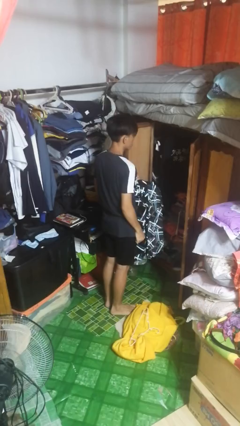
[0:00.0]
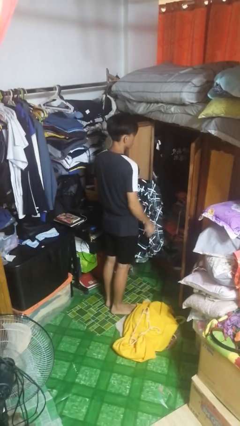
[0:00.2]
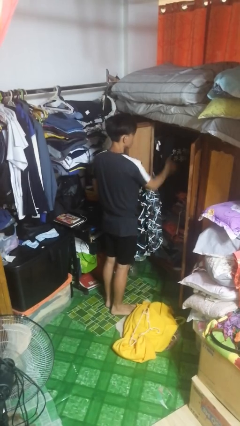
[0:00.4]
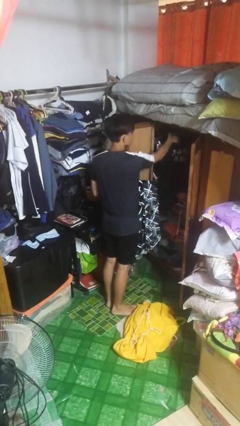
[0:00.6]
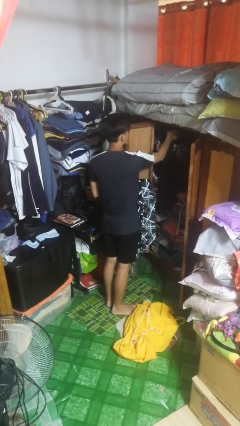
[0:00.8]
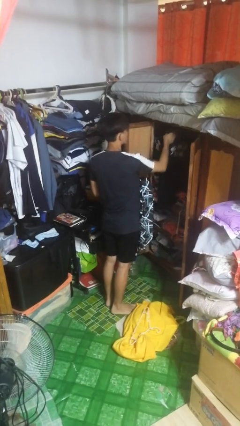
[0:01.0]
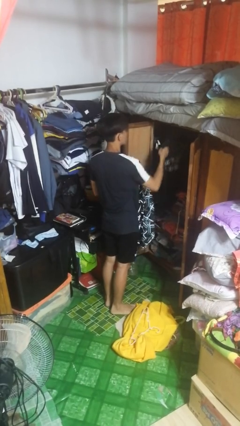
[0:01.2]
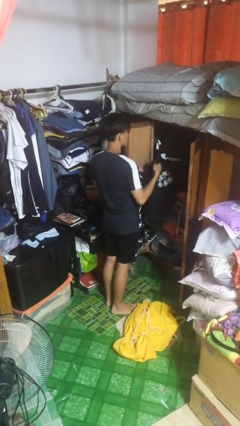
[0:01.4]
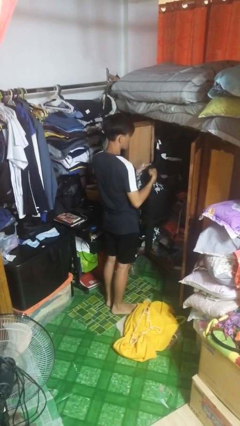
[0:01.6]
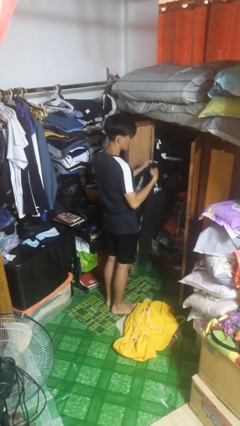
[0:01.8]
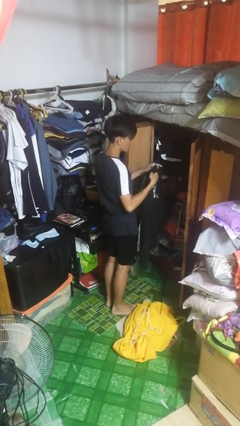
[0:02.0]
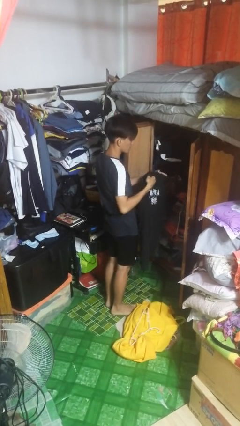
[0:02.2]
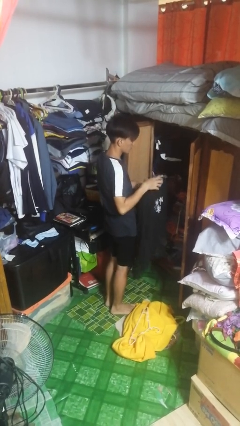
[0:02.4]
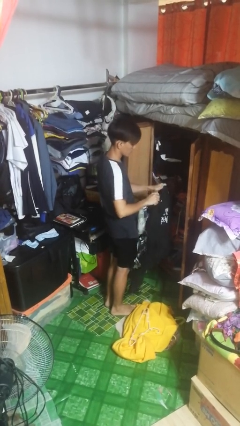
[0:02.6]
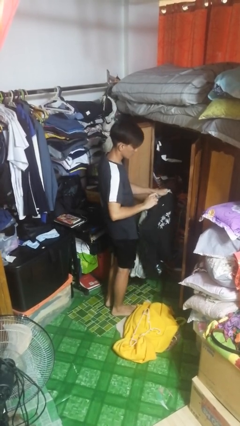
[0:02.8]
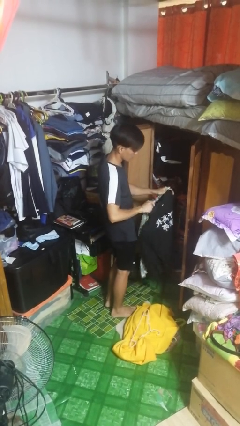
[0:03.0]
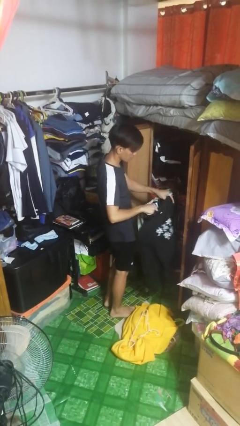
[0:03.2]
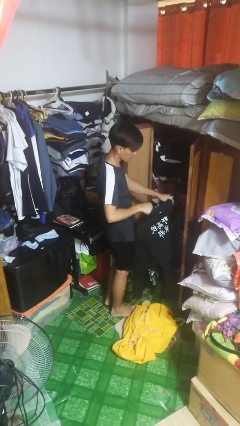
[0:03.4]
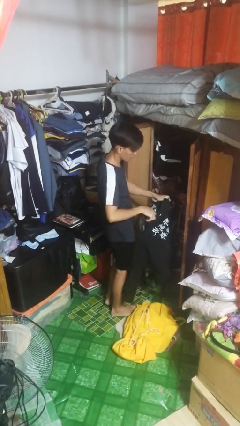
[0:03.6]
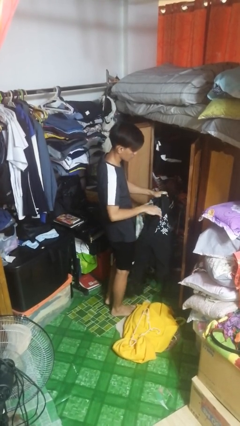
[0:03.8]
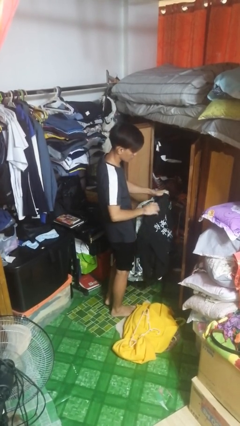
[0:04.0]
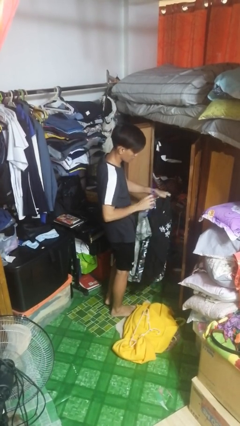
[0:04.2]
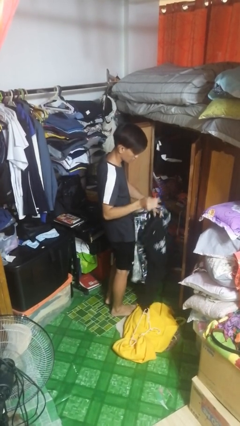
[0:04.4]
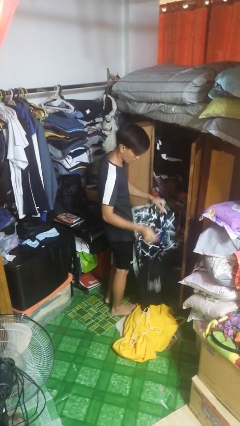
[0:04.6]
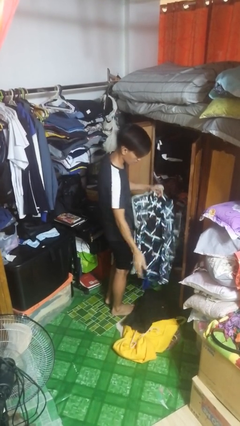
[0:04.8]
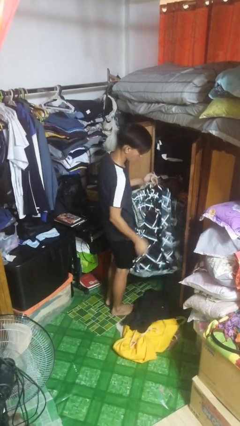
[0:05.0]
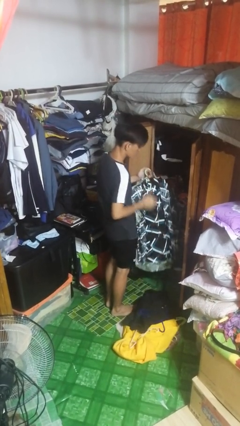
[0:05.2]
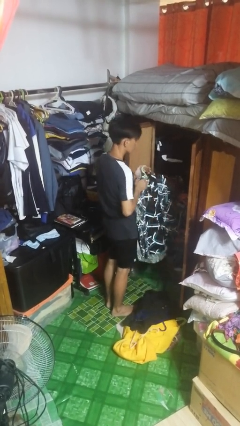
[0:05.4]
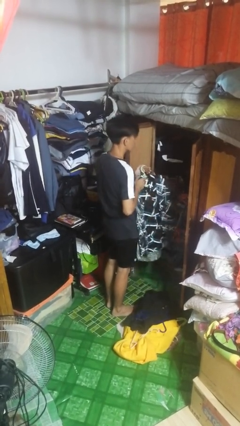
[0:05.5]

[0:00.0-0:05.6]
person takes clothes from closet

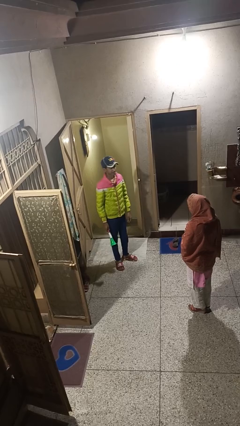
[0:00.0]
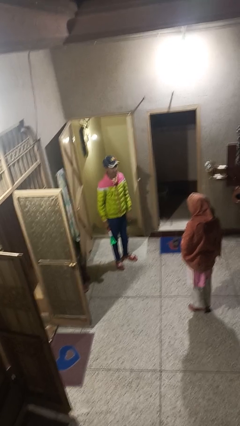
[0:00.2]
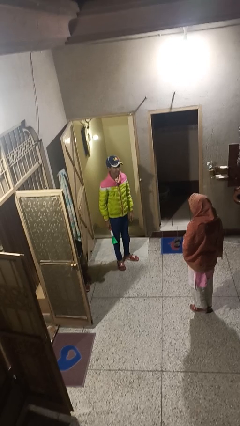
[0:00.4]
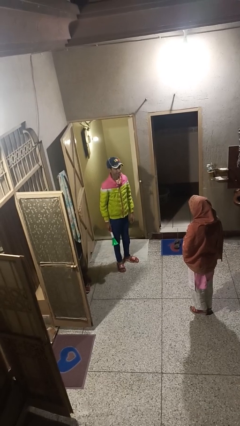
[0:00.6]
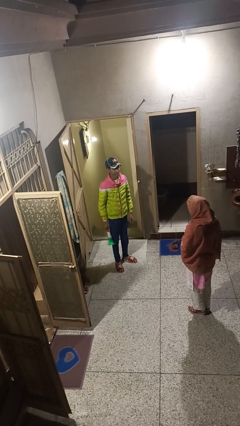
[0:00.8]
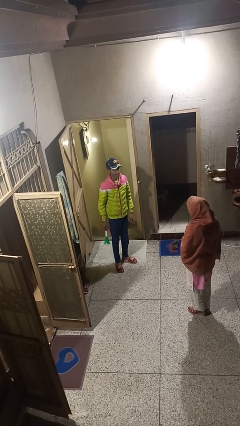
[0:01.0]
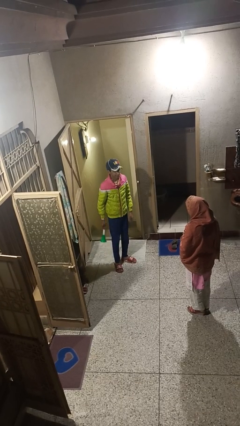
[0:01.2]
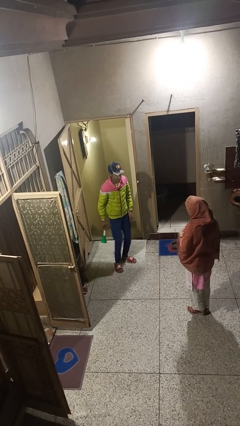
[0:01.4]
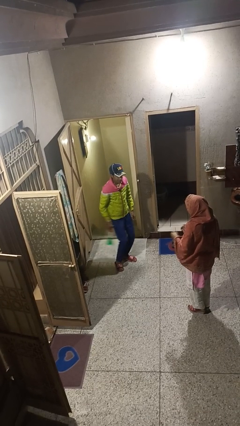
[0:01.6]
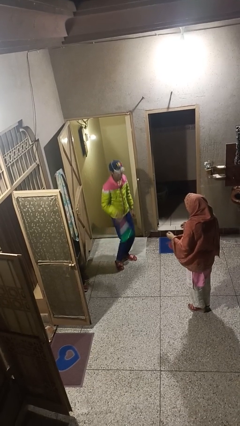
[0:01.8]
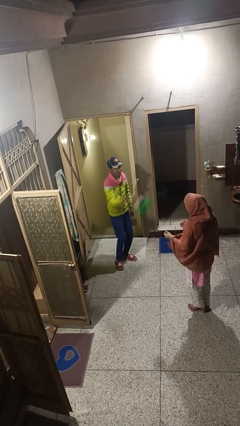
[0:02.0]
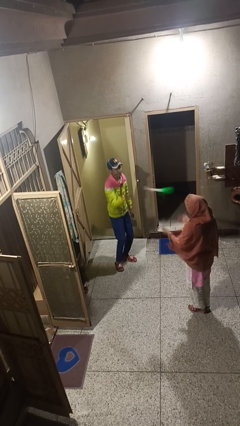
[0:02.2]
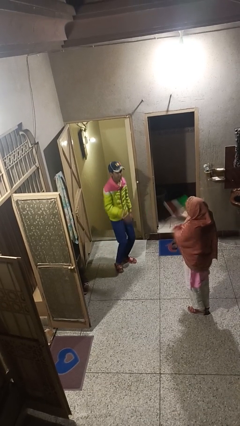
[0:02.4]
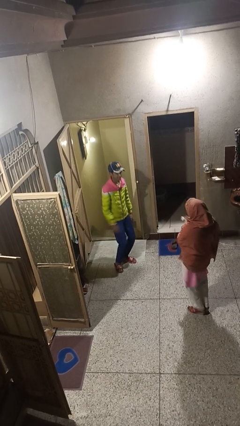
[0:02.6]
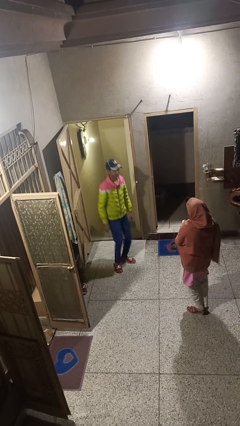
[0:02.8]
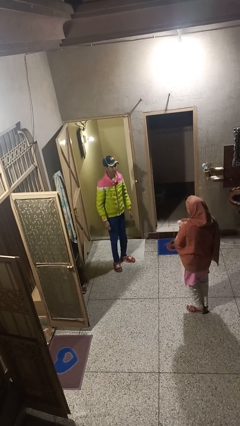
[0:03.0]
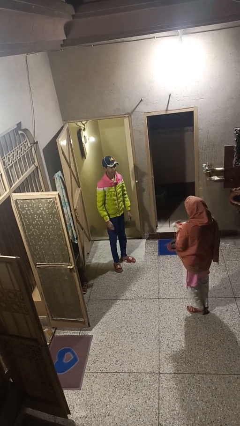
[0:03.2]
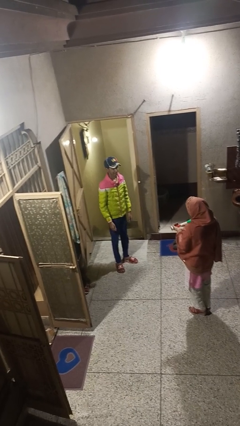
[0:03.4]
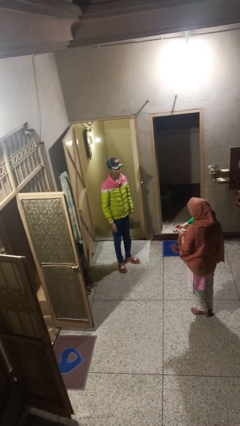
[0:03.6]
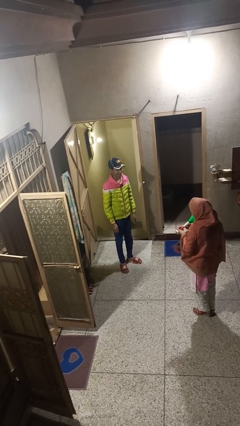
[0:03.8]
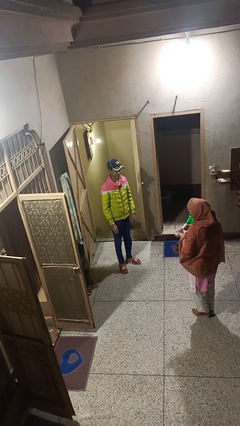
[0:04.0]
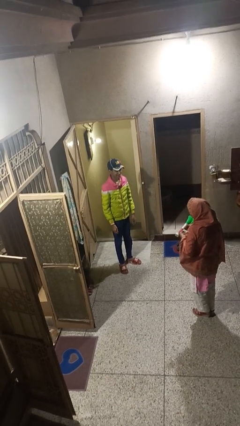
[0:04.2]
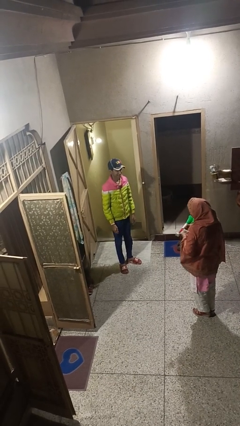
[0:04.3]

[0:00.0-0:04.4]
person throws object to person

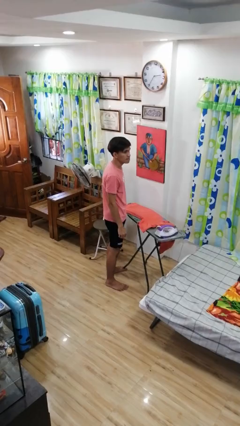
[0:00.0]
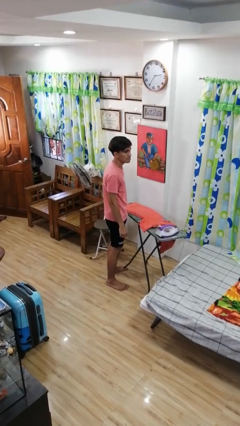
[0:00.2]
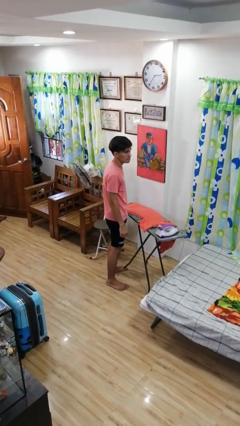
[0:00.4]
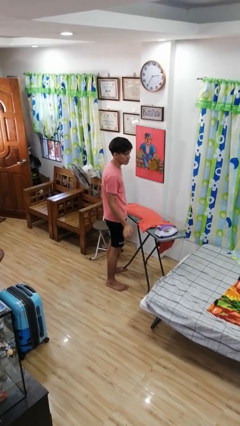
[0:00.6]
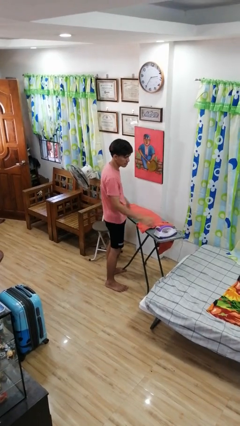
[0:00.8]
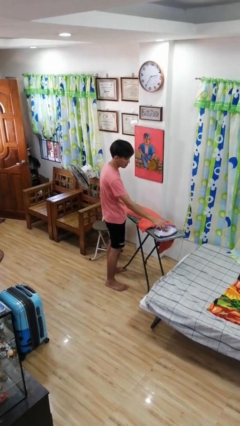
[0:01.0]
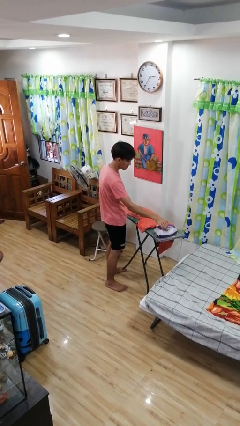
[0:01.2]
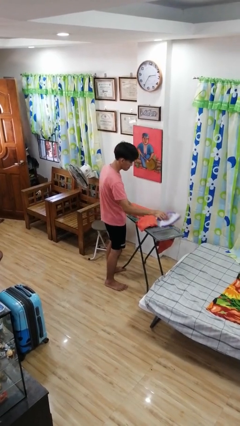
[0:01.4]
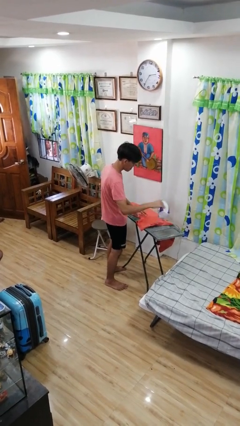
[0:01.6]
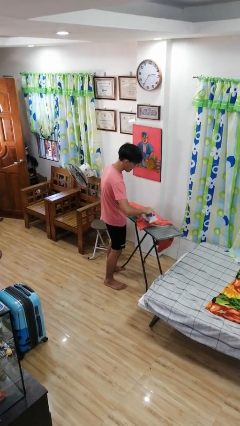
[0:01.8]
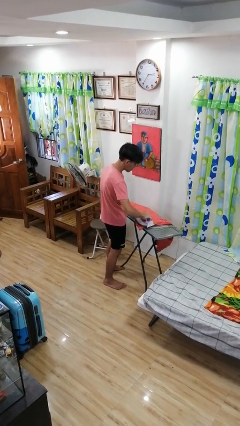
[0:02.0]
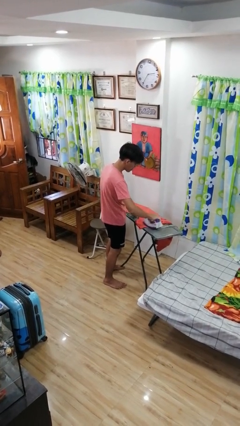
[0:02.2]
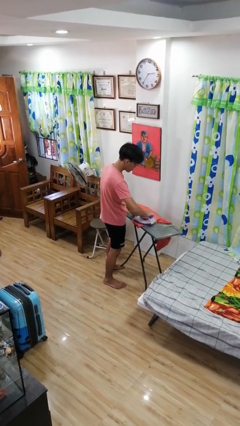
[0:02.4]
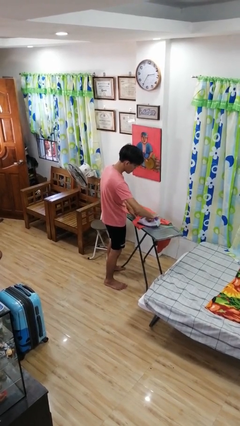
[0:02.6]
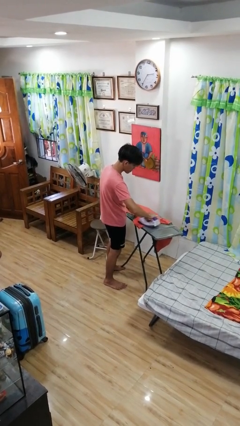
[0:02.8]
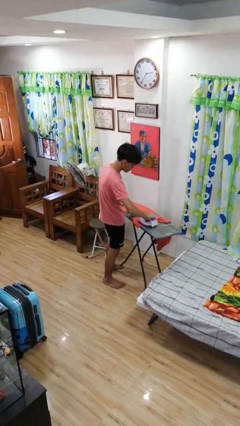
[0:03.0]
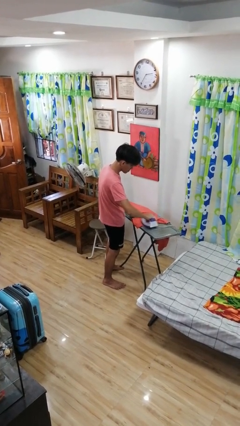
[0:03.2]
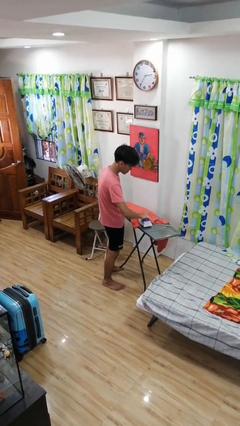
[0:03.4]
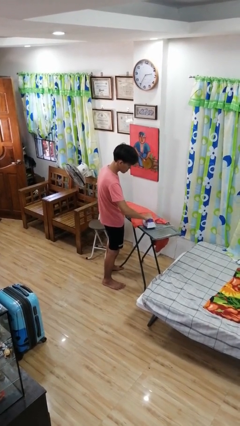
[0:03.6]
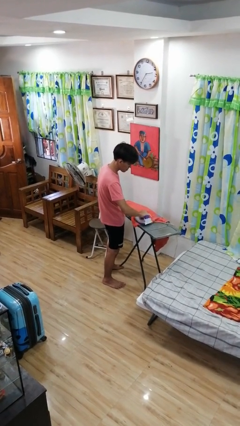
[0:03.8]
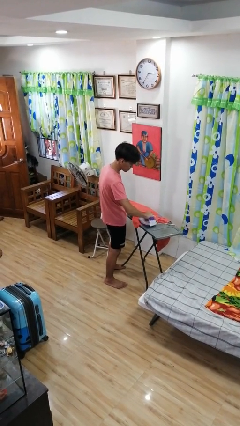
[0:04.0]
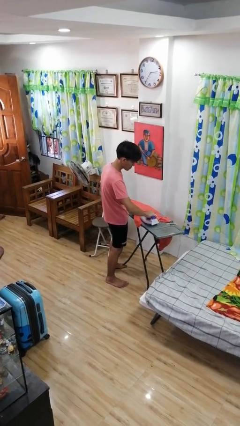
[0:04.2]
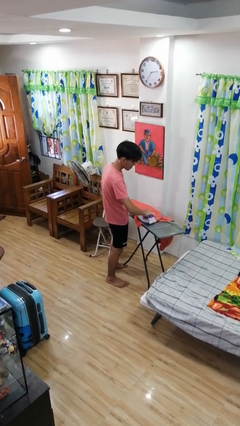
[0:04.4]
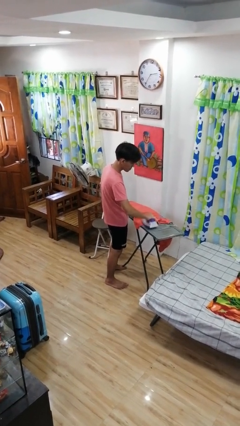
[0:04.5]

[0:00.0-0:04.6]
person irons clothes

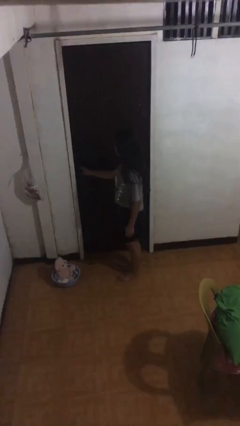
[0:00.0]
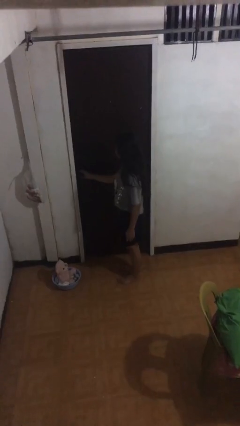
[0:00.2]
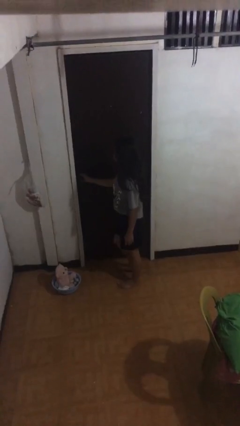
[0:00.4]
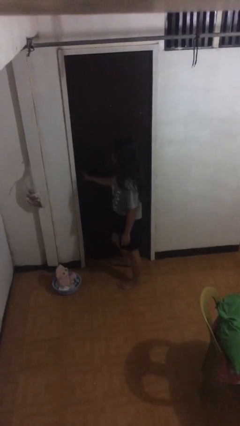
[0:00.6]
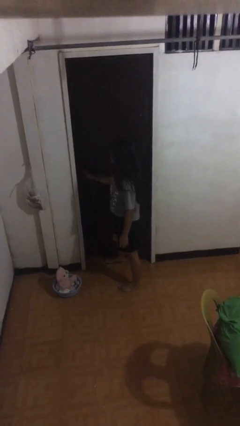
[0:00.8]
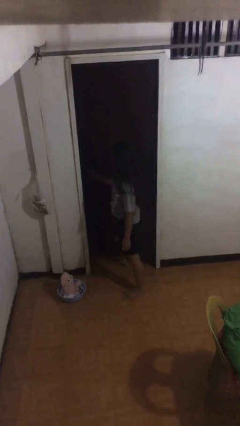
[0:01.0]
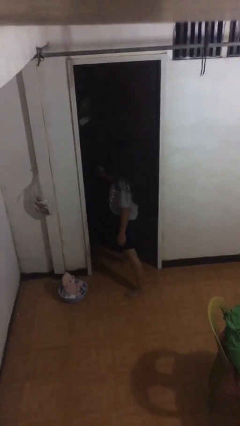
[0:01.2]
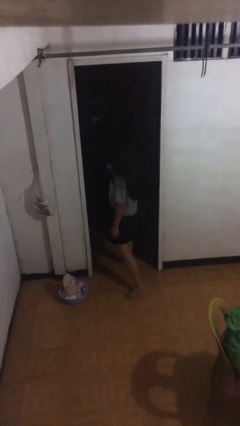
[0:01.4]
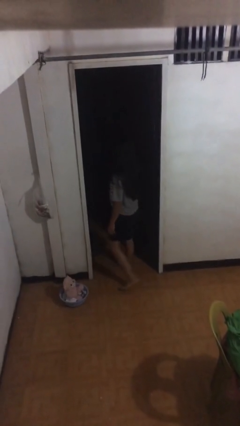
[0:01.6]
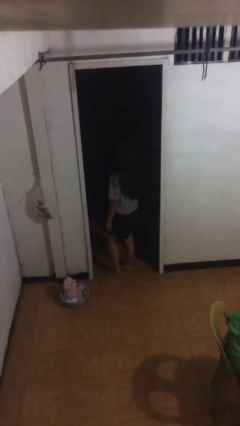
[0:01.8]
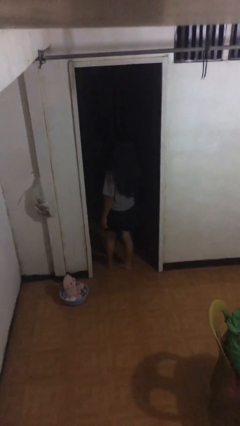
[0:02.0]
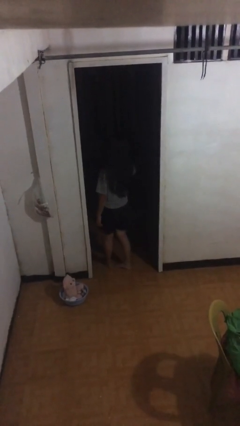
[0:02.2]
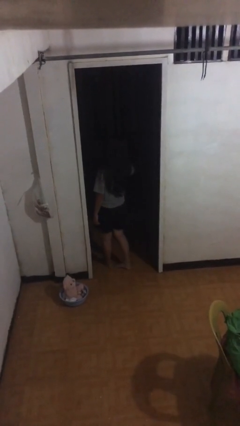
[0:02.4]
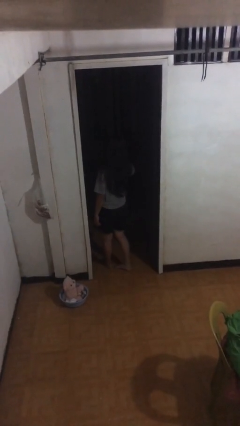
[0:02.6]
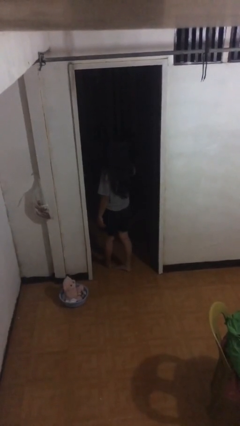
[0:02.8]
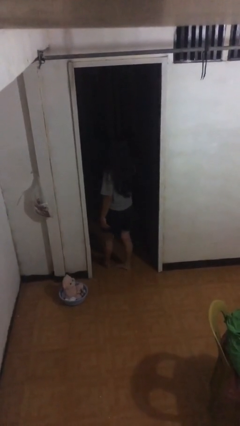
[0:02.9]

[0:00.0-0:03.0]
person opens facility door
